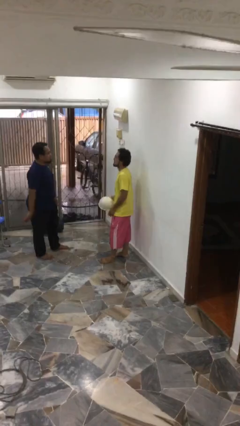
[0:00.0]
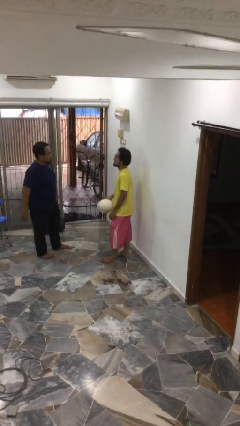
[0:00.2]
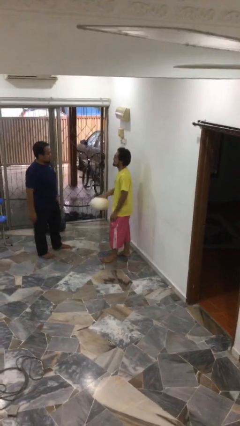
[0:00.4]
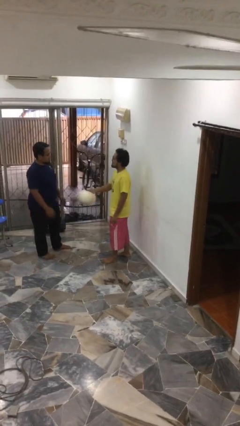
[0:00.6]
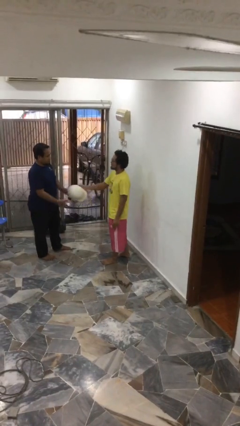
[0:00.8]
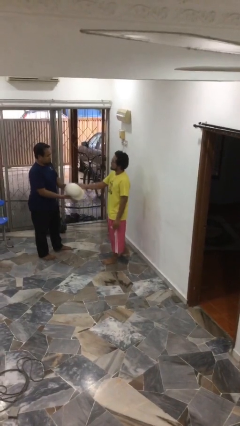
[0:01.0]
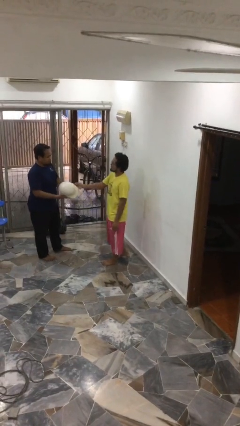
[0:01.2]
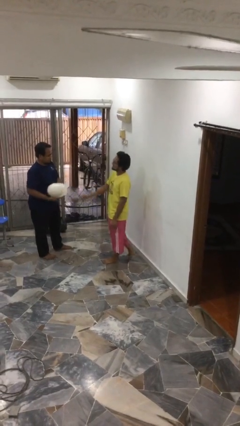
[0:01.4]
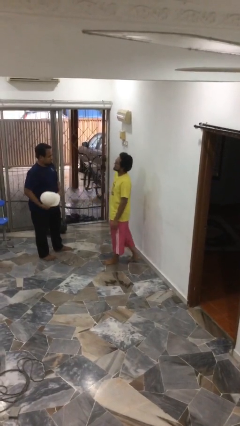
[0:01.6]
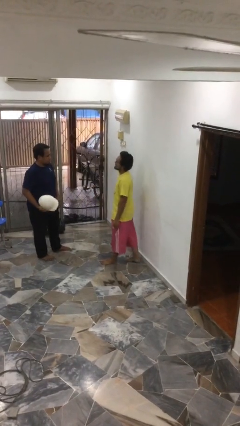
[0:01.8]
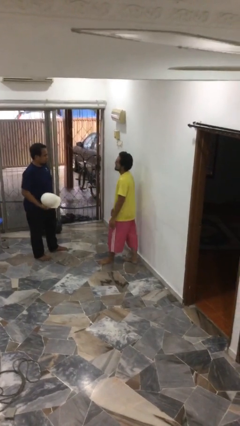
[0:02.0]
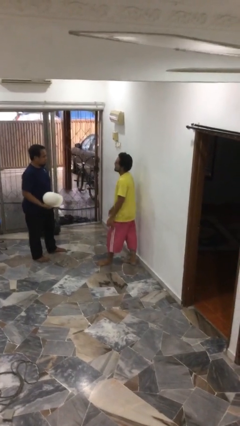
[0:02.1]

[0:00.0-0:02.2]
person transfers object to person

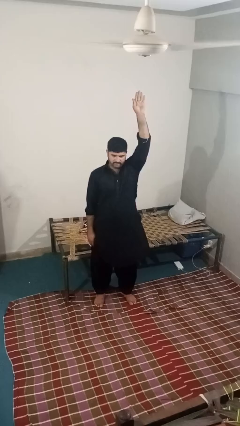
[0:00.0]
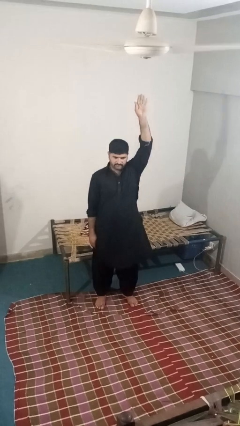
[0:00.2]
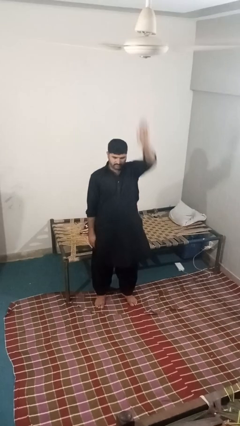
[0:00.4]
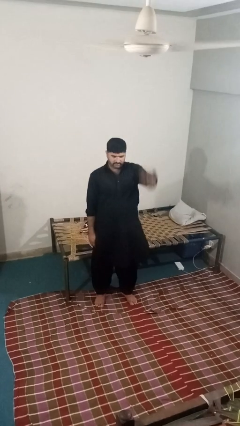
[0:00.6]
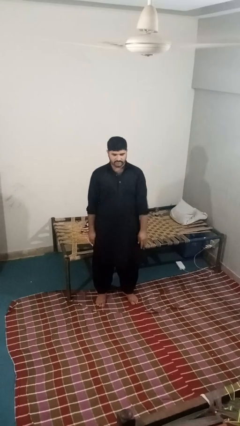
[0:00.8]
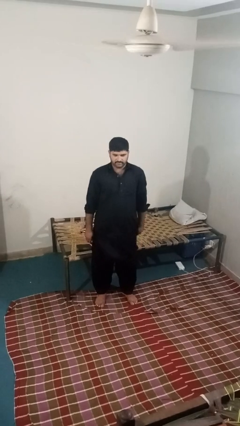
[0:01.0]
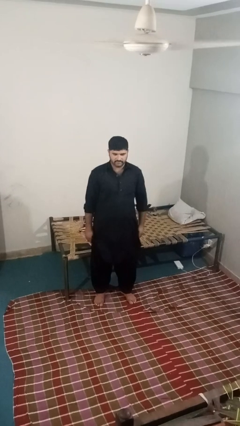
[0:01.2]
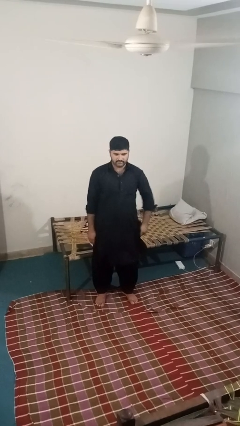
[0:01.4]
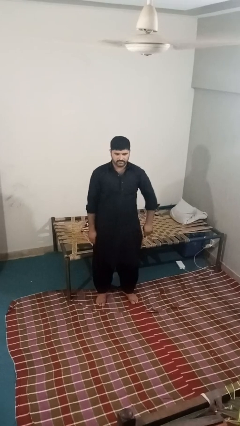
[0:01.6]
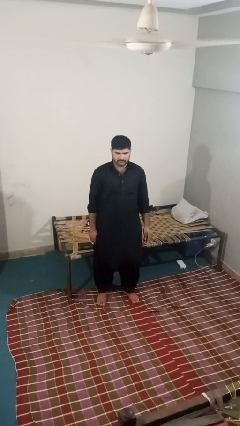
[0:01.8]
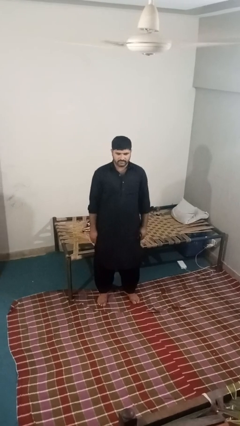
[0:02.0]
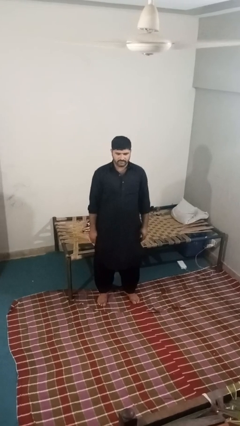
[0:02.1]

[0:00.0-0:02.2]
person gestures lower hand

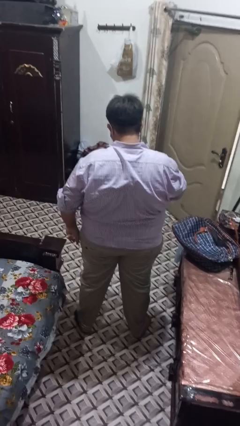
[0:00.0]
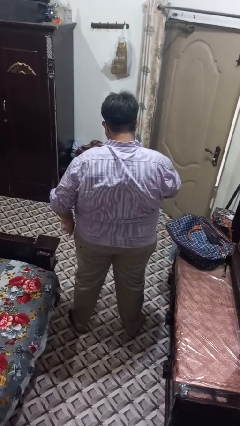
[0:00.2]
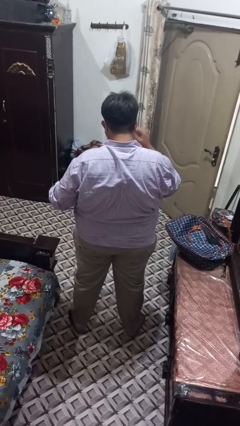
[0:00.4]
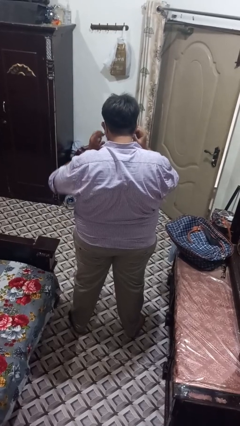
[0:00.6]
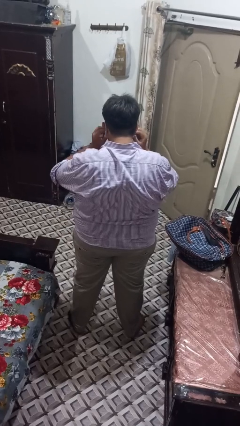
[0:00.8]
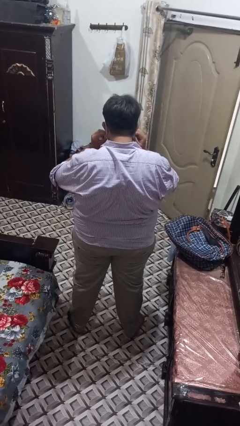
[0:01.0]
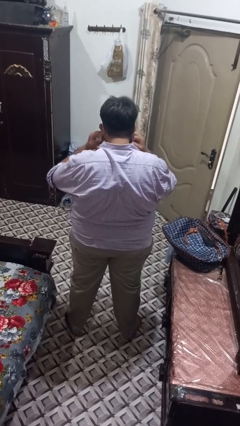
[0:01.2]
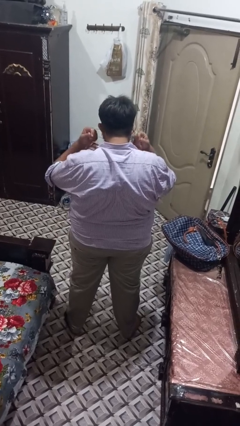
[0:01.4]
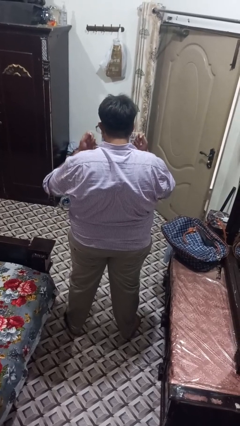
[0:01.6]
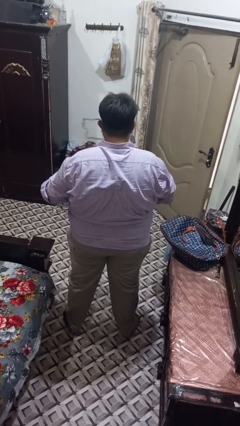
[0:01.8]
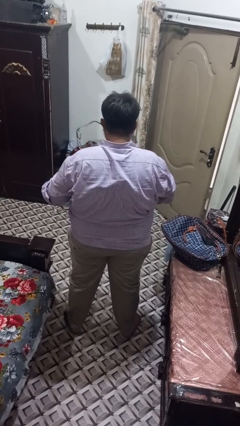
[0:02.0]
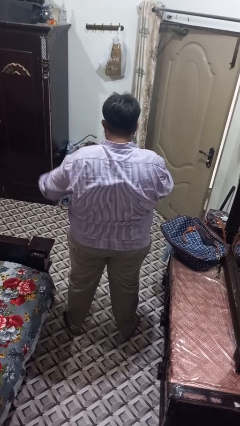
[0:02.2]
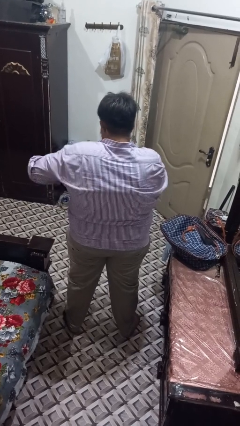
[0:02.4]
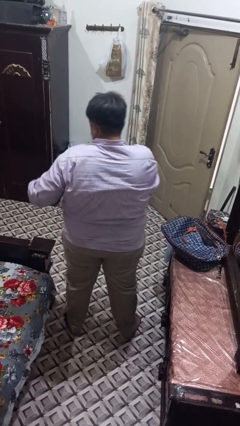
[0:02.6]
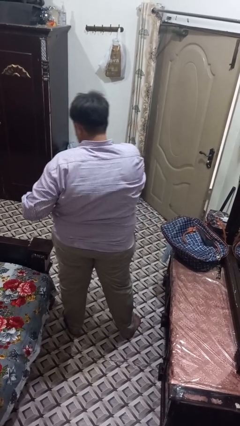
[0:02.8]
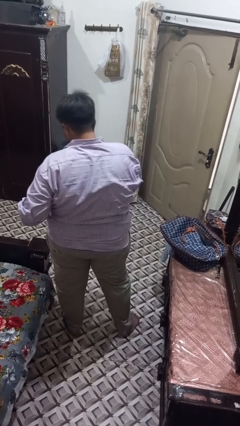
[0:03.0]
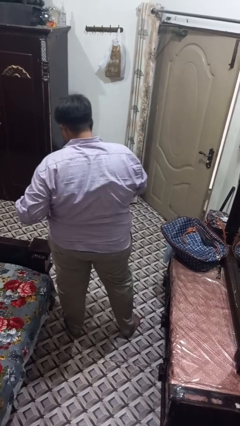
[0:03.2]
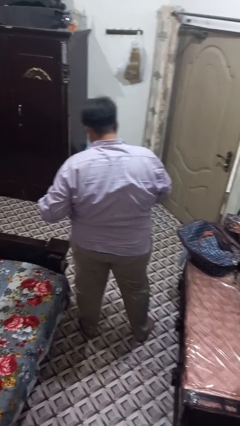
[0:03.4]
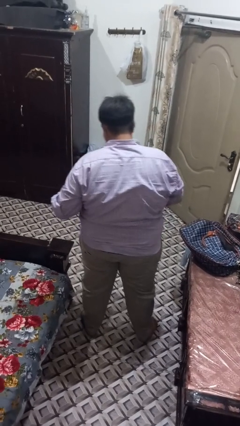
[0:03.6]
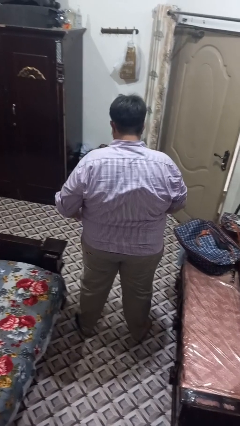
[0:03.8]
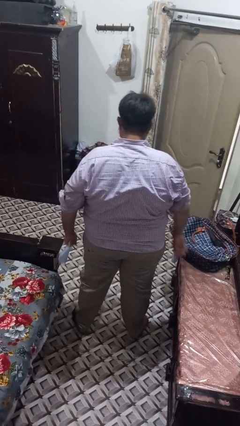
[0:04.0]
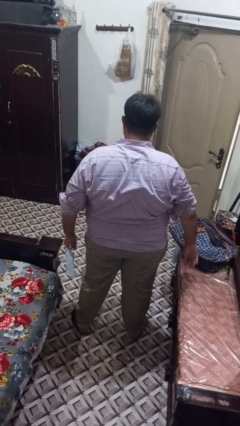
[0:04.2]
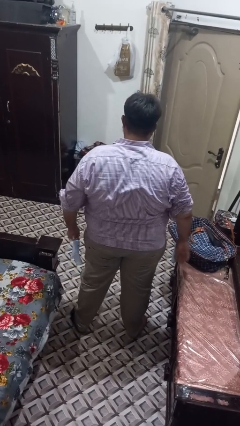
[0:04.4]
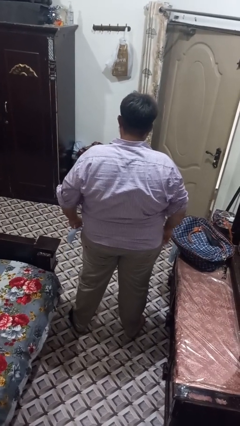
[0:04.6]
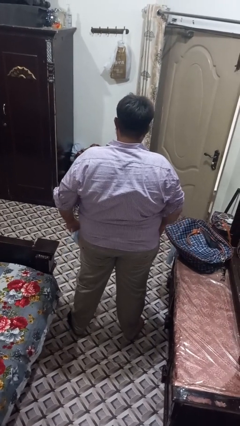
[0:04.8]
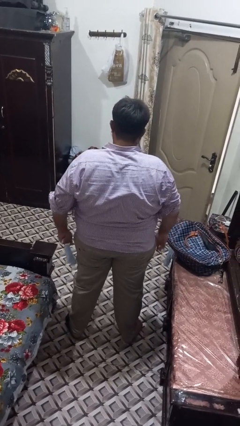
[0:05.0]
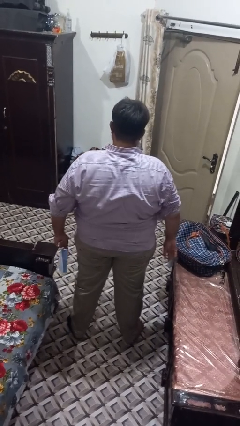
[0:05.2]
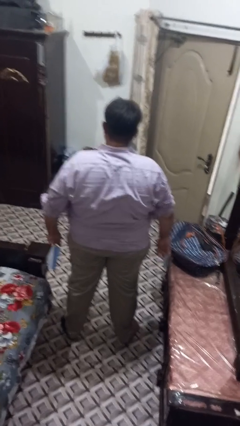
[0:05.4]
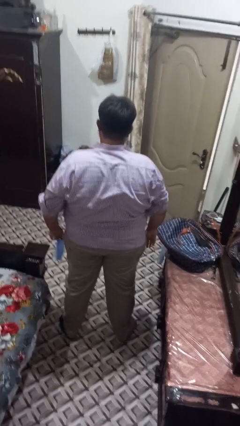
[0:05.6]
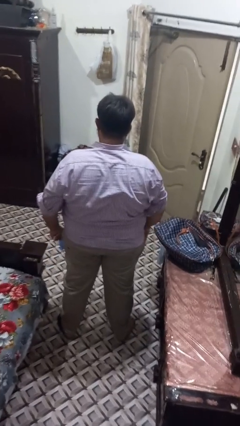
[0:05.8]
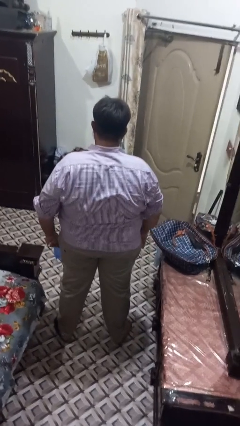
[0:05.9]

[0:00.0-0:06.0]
person takes off facemask

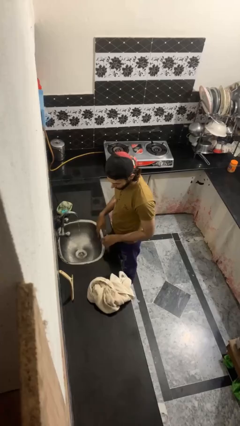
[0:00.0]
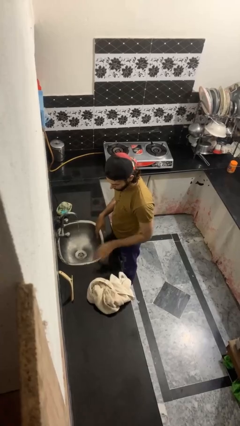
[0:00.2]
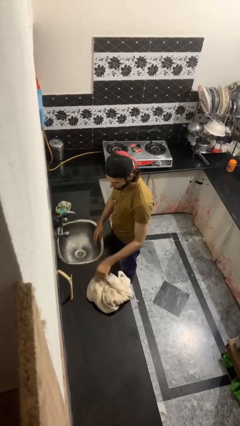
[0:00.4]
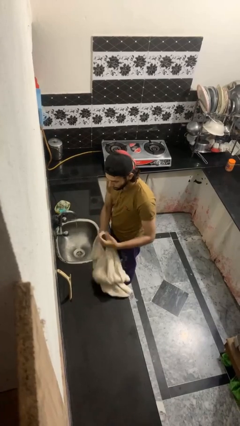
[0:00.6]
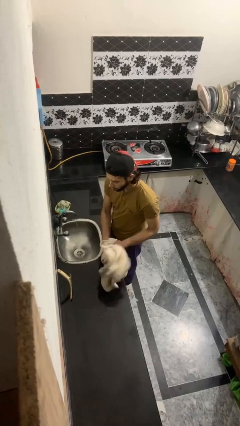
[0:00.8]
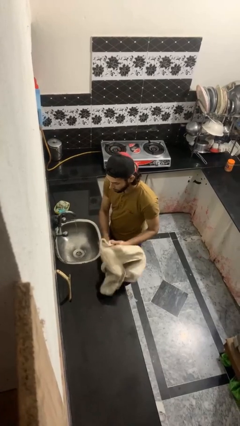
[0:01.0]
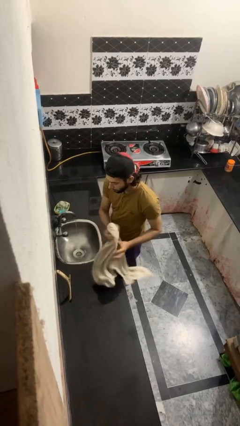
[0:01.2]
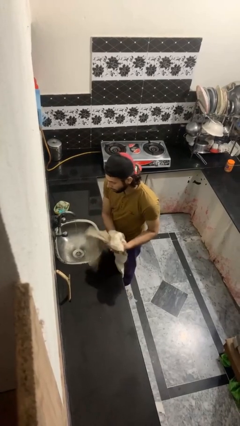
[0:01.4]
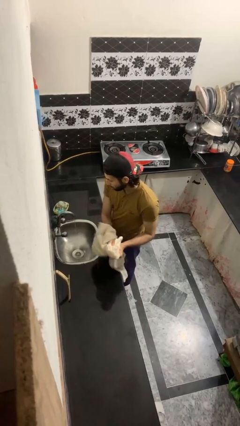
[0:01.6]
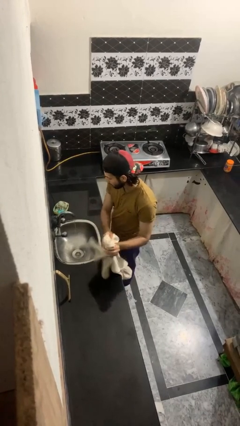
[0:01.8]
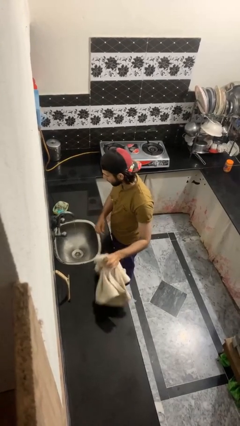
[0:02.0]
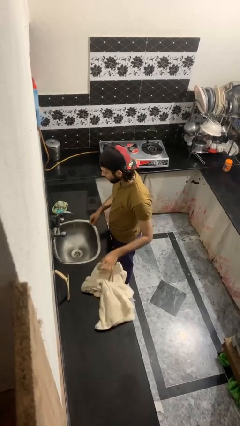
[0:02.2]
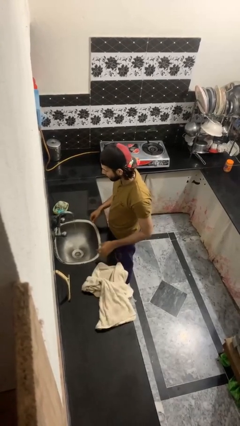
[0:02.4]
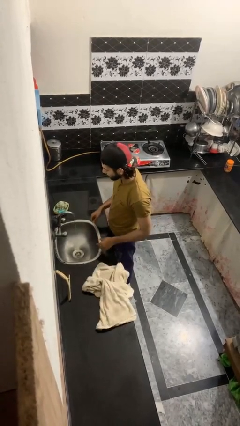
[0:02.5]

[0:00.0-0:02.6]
person dries hands with towel

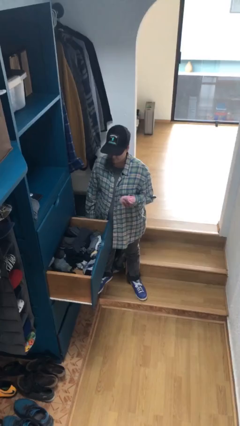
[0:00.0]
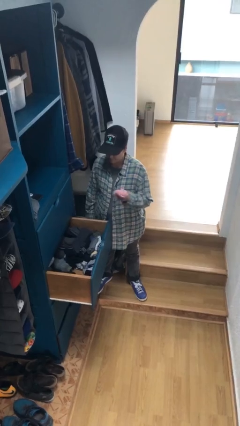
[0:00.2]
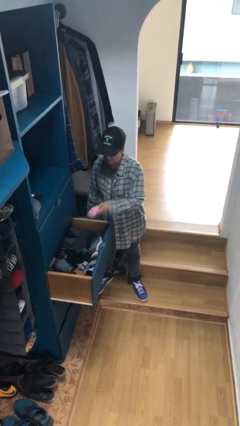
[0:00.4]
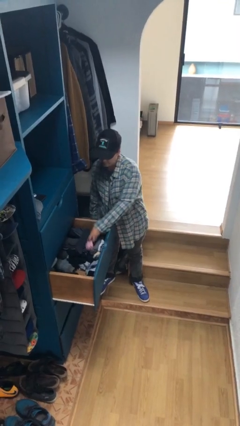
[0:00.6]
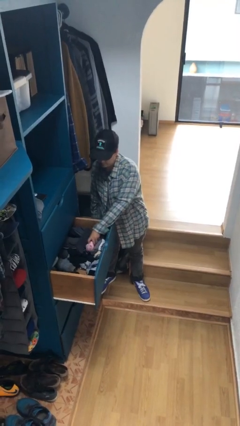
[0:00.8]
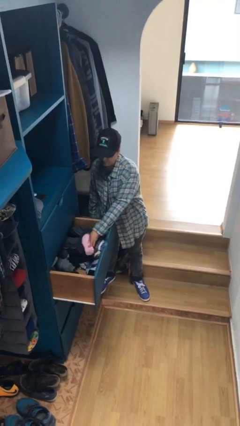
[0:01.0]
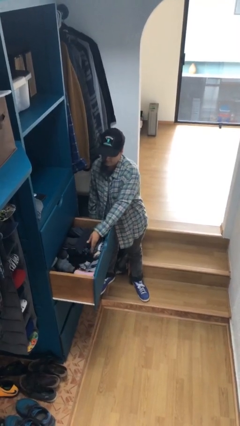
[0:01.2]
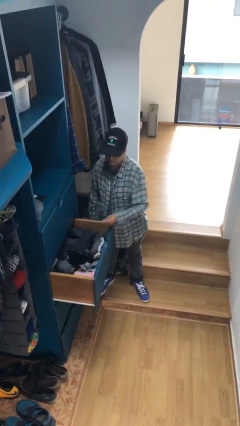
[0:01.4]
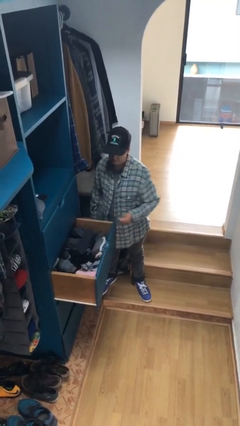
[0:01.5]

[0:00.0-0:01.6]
person puts clothes into dresser

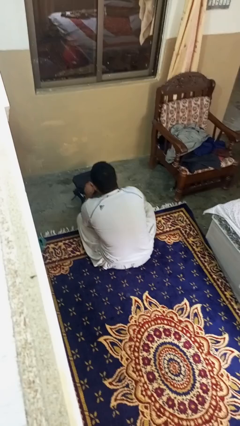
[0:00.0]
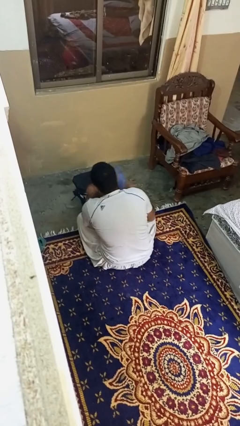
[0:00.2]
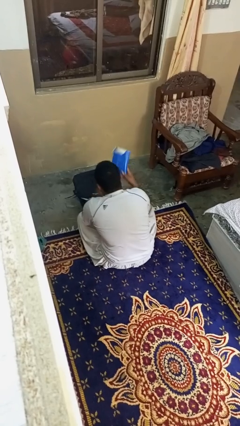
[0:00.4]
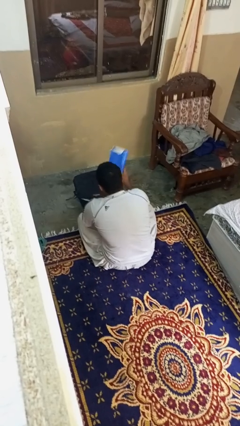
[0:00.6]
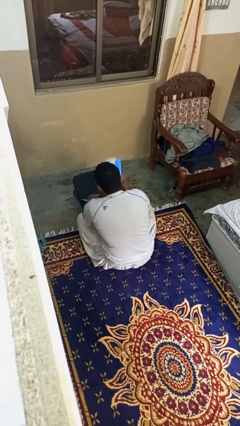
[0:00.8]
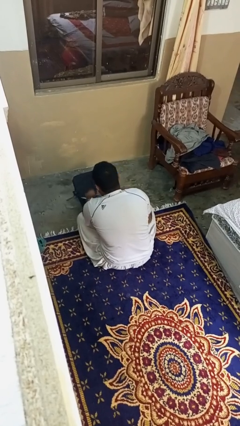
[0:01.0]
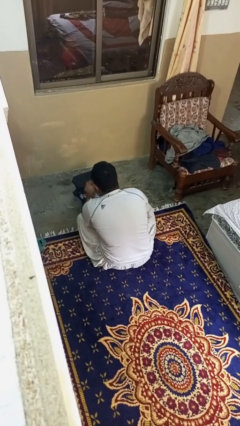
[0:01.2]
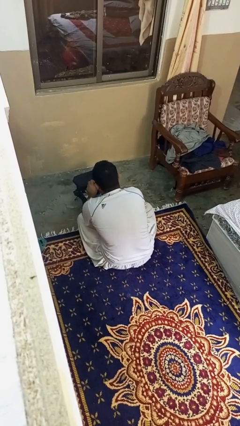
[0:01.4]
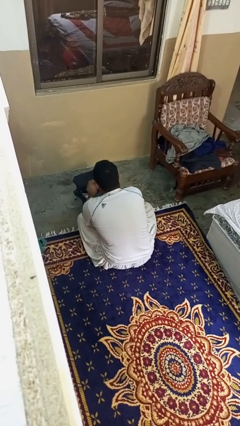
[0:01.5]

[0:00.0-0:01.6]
person puts object into bag

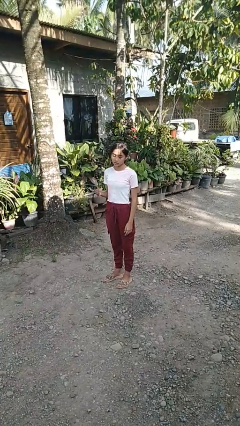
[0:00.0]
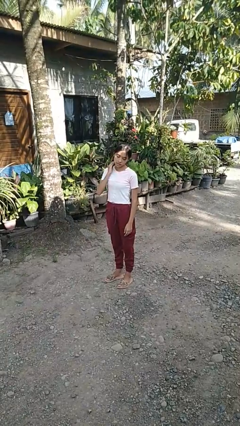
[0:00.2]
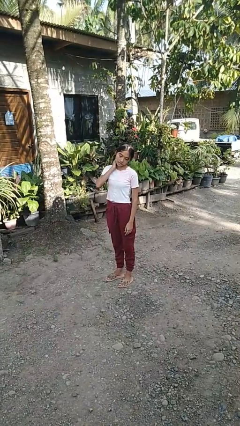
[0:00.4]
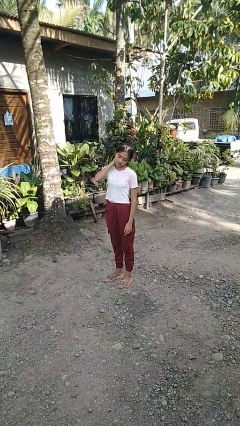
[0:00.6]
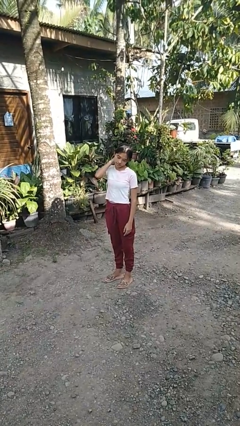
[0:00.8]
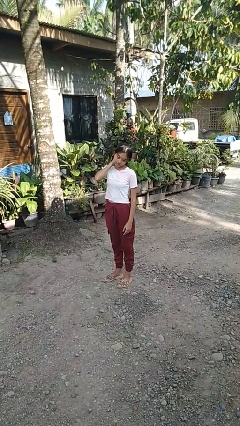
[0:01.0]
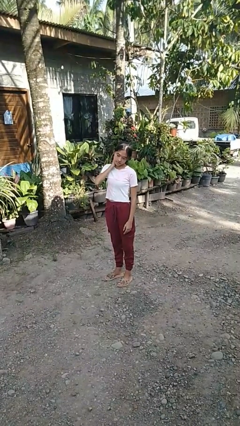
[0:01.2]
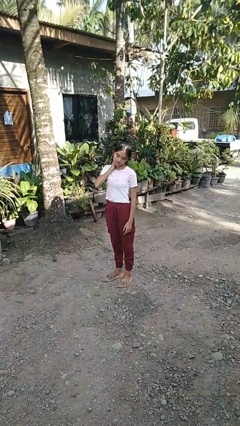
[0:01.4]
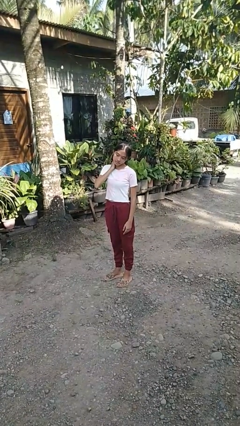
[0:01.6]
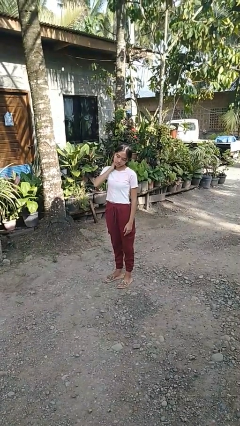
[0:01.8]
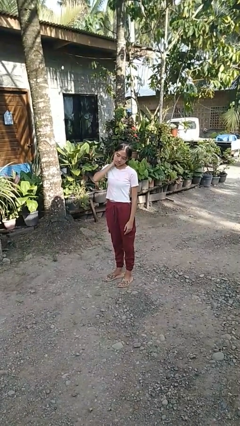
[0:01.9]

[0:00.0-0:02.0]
person rubs neck
